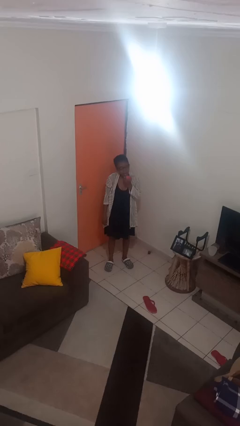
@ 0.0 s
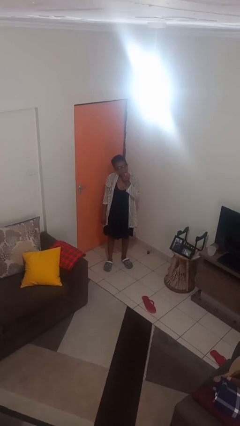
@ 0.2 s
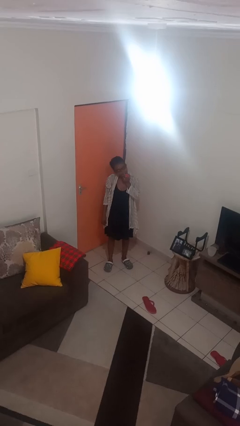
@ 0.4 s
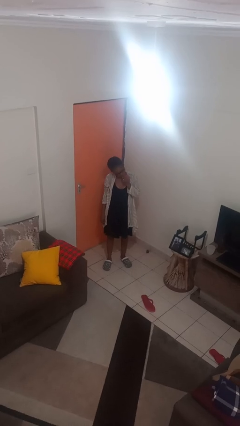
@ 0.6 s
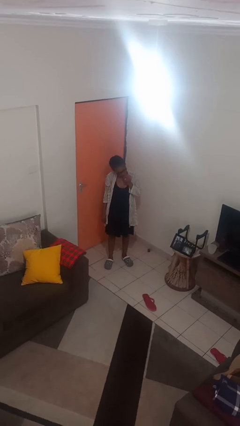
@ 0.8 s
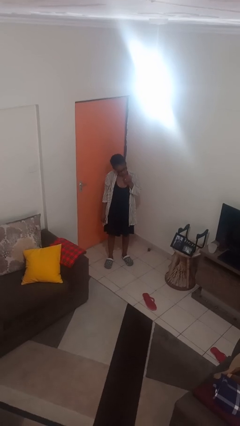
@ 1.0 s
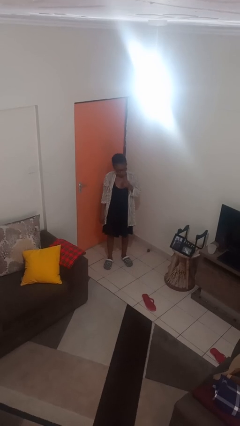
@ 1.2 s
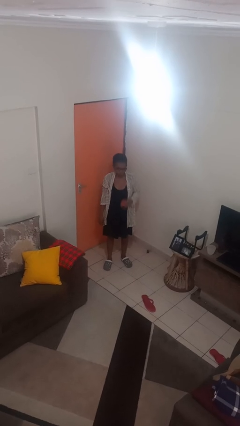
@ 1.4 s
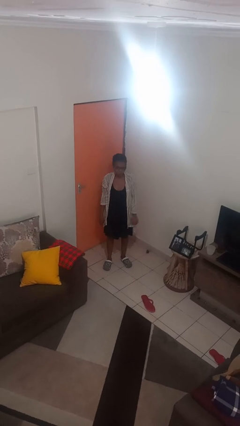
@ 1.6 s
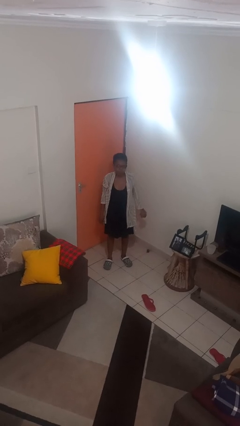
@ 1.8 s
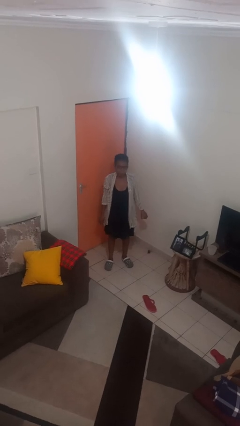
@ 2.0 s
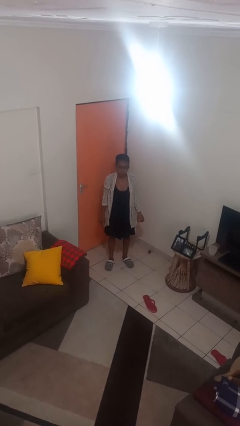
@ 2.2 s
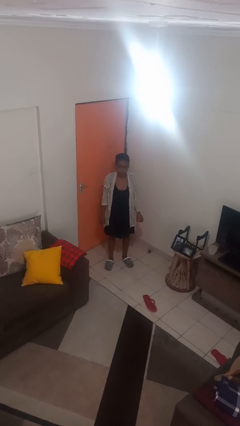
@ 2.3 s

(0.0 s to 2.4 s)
person eats apple

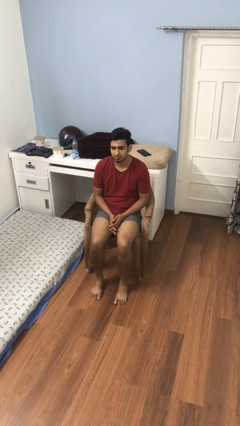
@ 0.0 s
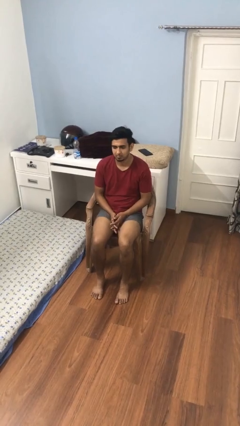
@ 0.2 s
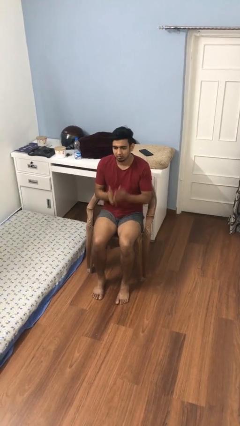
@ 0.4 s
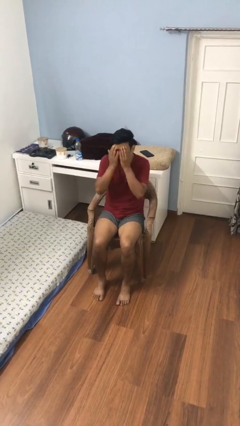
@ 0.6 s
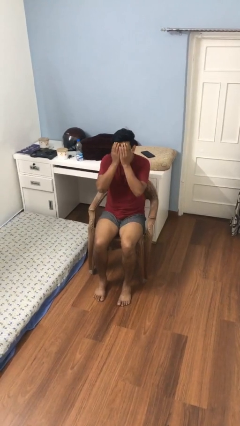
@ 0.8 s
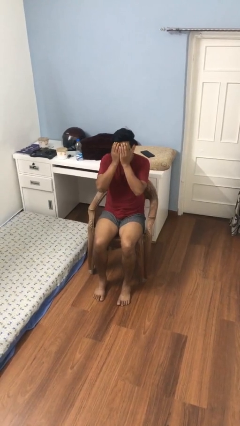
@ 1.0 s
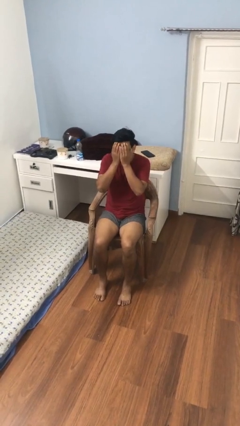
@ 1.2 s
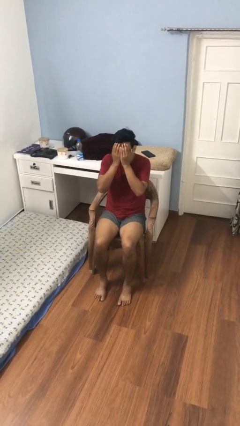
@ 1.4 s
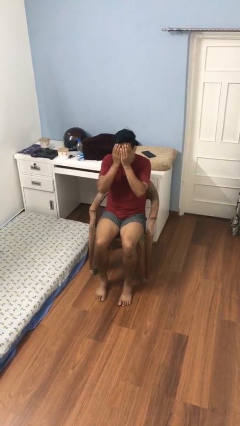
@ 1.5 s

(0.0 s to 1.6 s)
person covers face with hands

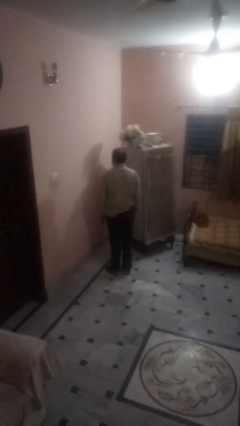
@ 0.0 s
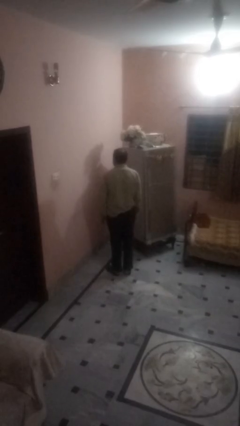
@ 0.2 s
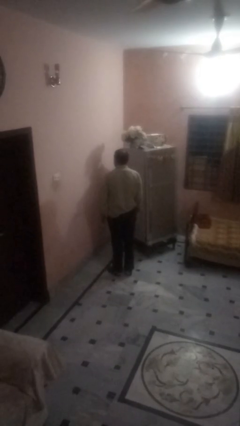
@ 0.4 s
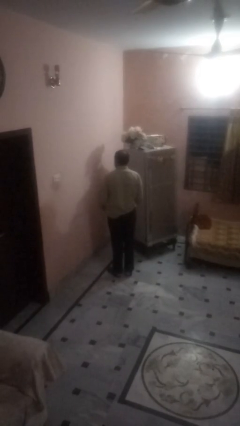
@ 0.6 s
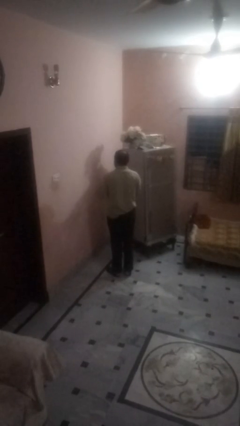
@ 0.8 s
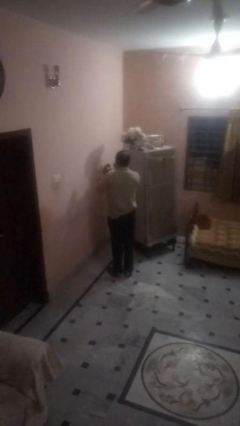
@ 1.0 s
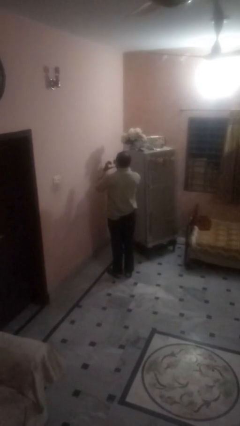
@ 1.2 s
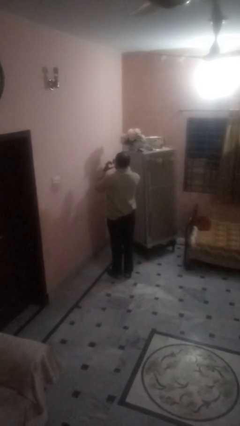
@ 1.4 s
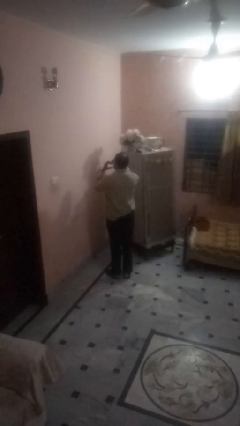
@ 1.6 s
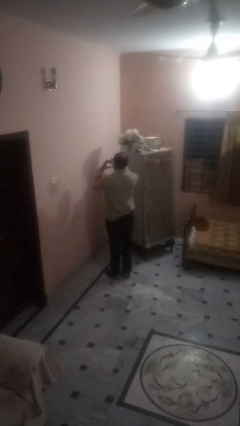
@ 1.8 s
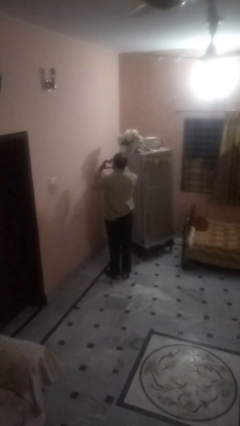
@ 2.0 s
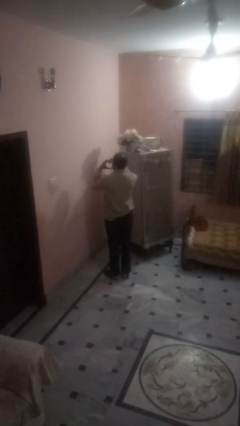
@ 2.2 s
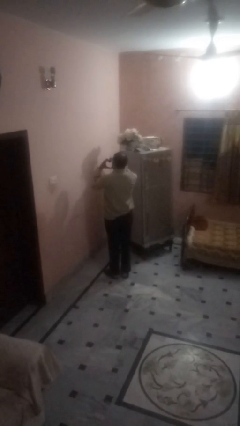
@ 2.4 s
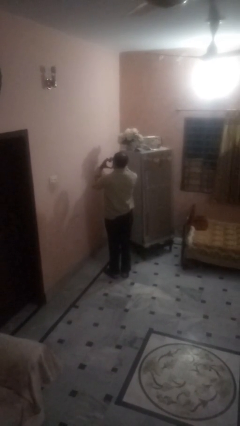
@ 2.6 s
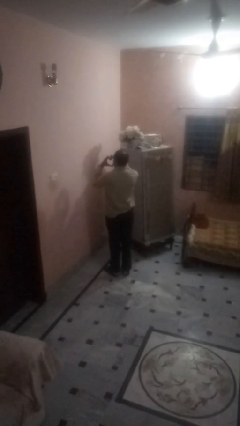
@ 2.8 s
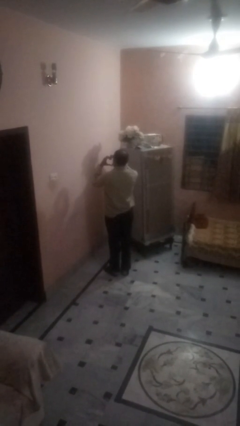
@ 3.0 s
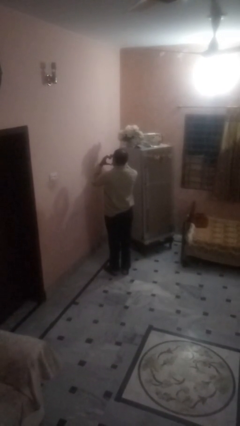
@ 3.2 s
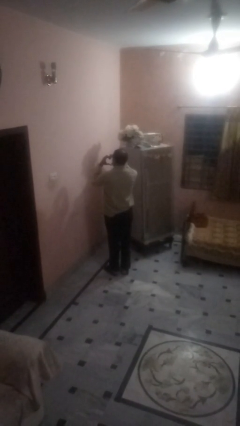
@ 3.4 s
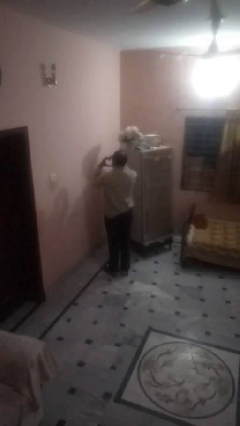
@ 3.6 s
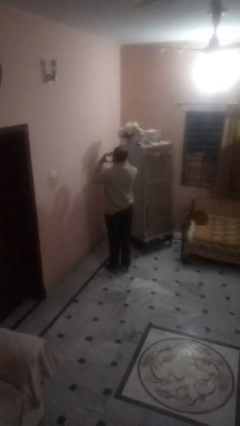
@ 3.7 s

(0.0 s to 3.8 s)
person gestures heart

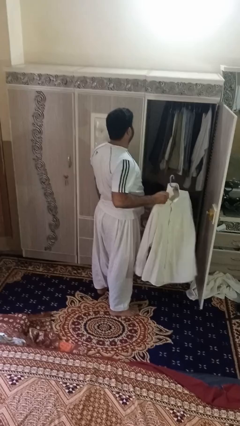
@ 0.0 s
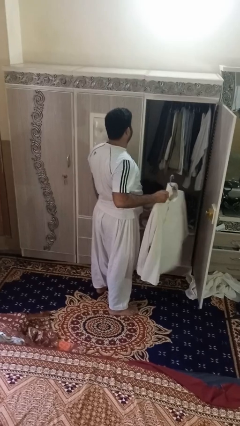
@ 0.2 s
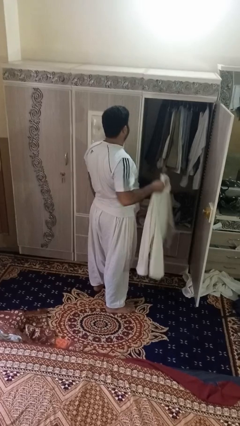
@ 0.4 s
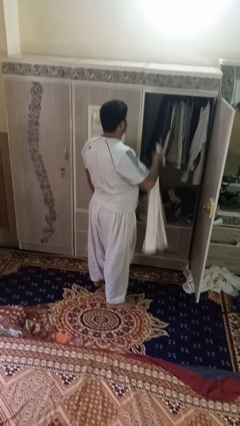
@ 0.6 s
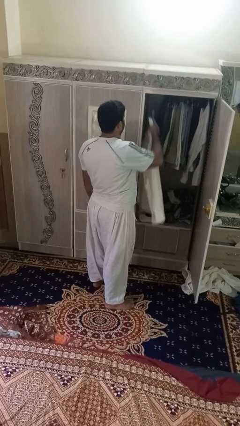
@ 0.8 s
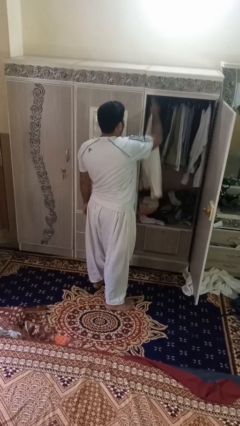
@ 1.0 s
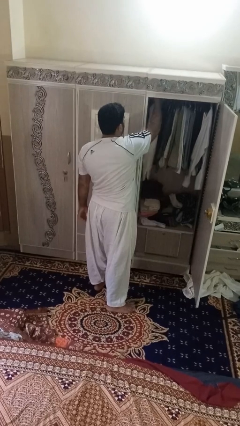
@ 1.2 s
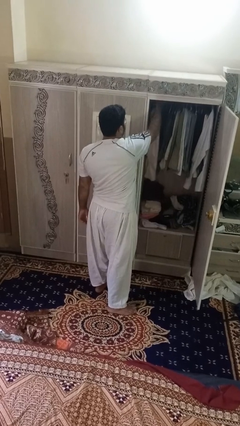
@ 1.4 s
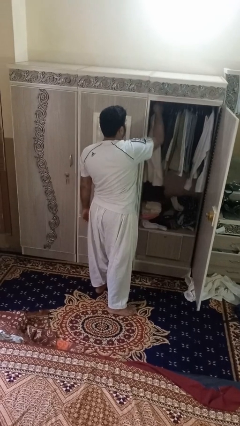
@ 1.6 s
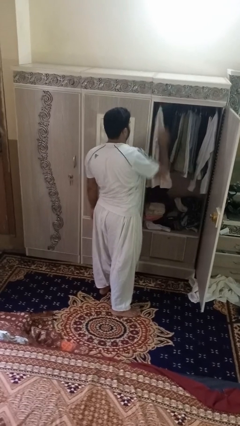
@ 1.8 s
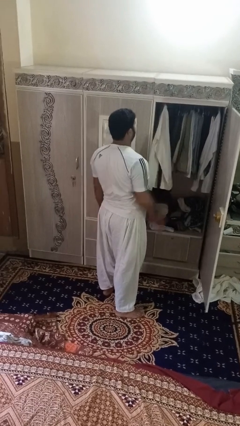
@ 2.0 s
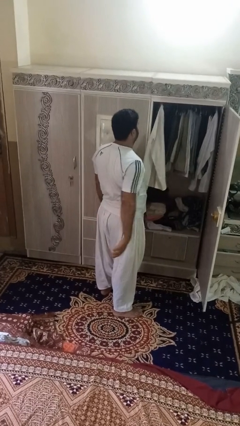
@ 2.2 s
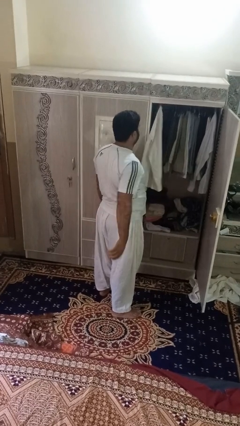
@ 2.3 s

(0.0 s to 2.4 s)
person puts clothes into closet

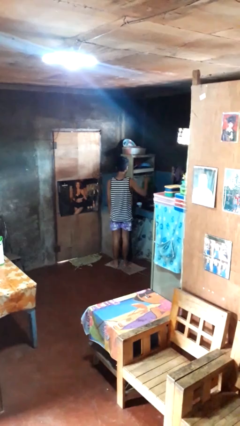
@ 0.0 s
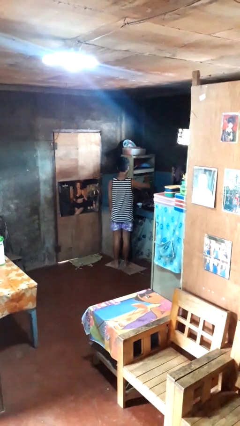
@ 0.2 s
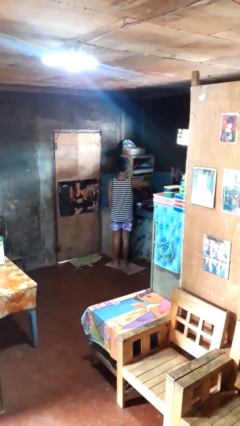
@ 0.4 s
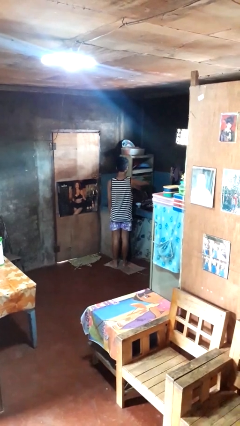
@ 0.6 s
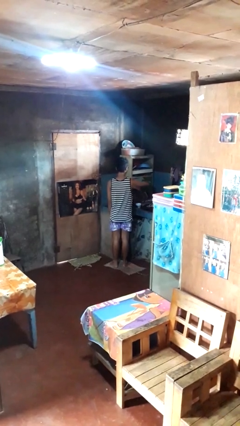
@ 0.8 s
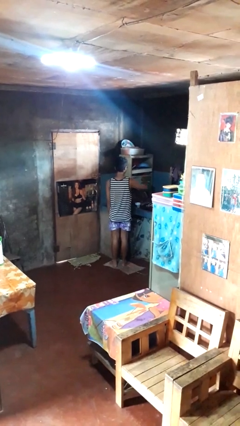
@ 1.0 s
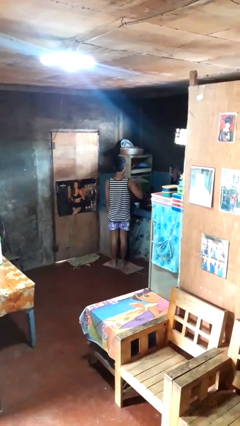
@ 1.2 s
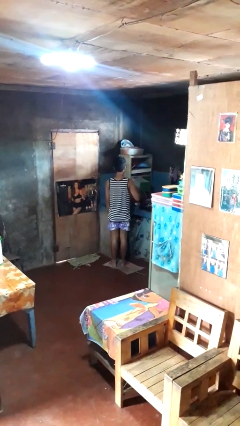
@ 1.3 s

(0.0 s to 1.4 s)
person puts object into kitchen drawer

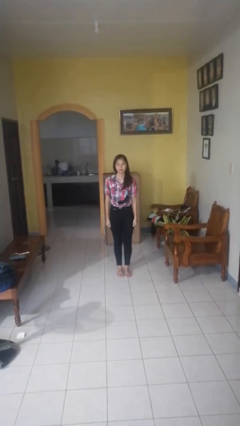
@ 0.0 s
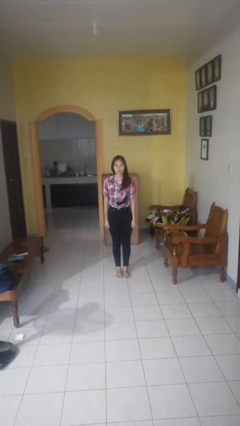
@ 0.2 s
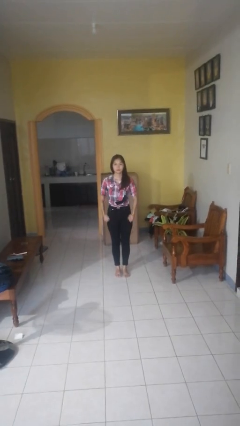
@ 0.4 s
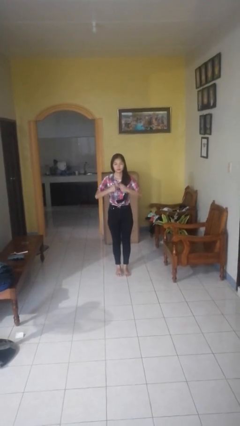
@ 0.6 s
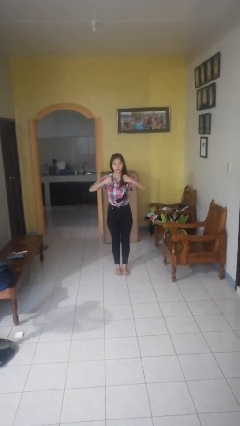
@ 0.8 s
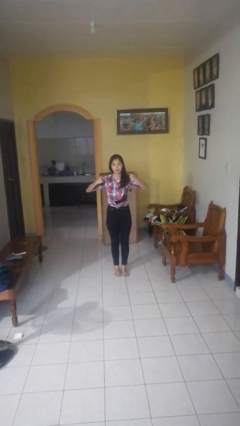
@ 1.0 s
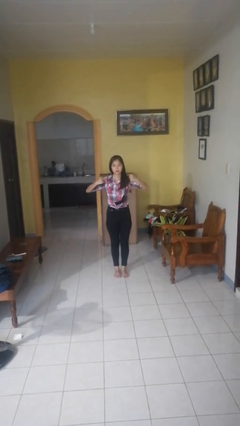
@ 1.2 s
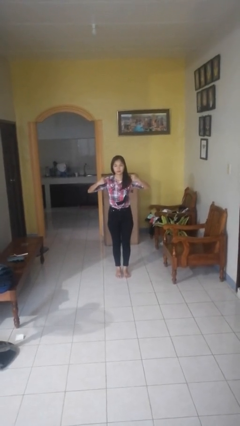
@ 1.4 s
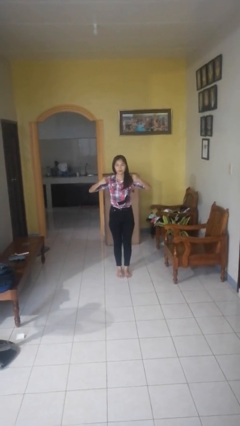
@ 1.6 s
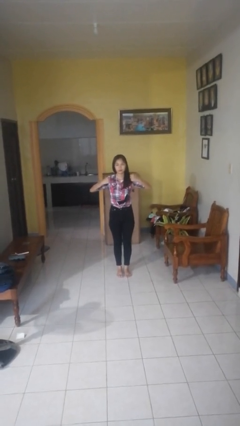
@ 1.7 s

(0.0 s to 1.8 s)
person gestures zoom in

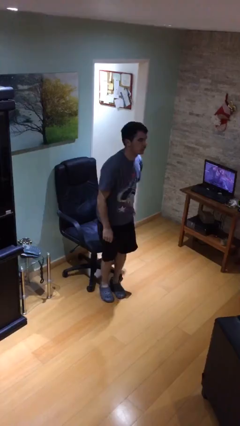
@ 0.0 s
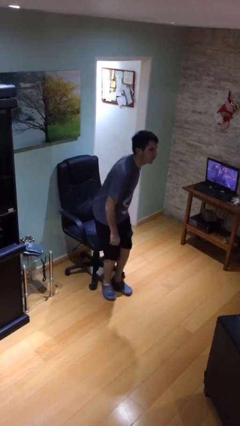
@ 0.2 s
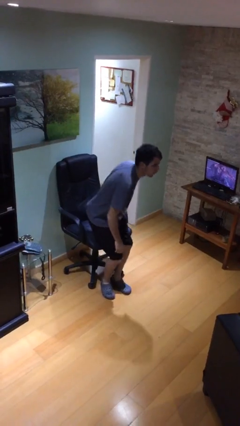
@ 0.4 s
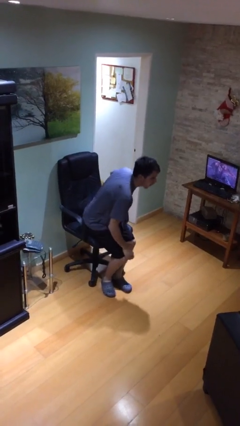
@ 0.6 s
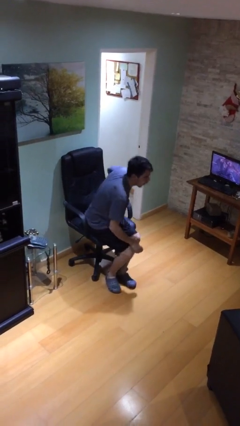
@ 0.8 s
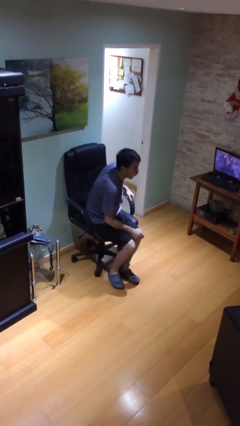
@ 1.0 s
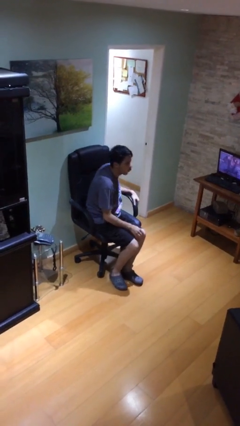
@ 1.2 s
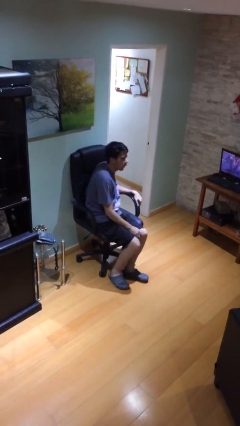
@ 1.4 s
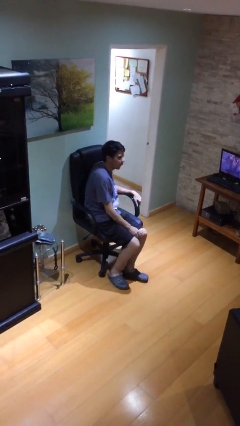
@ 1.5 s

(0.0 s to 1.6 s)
person sits down

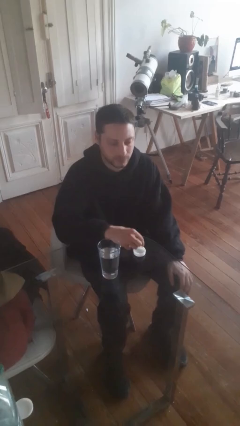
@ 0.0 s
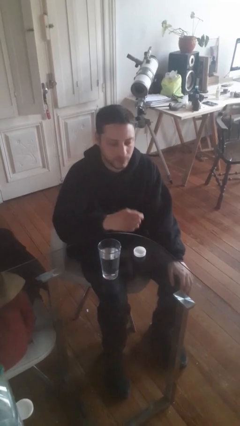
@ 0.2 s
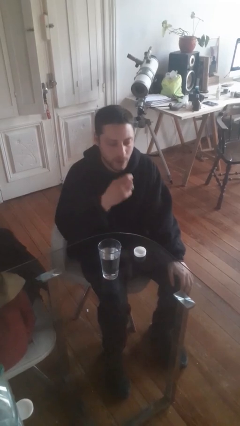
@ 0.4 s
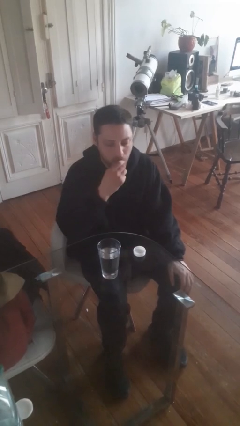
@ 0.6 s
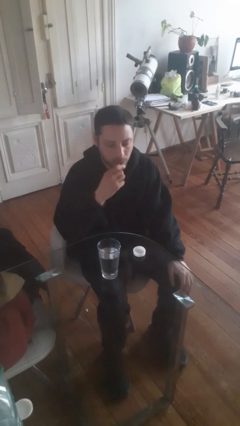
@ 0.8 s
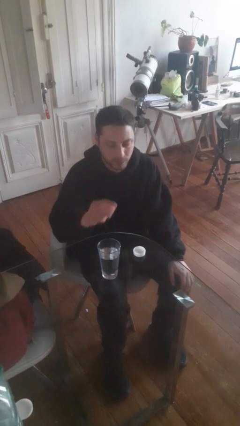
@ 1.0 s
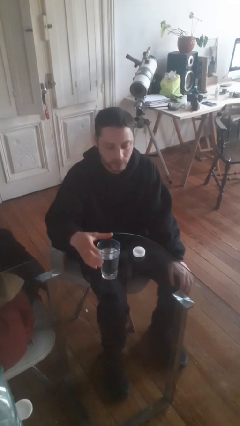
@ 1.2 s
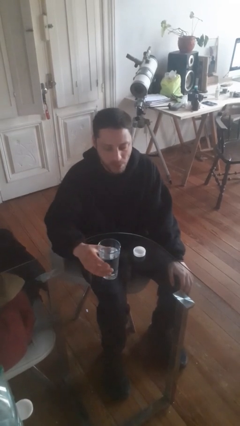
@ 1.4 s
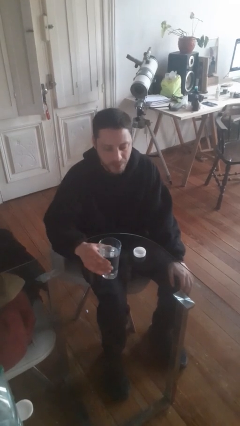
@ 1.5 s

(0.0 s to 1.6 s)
person takes medicine pills
